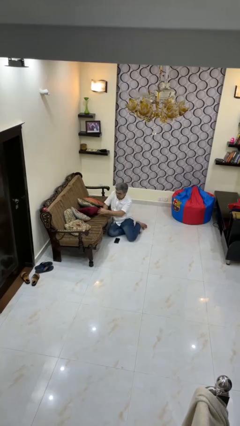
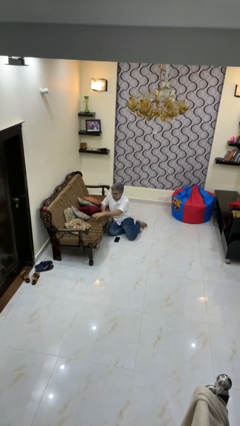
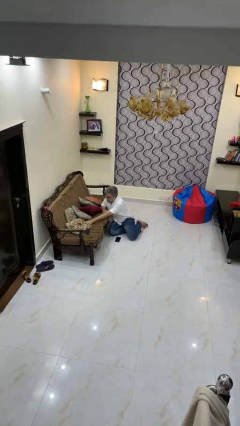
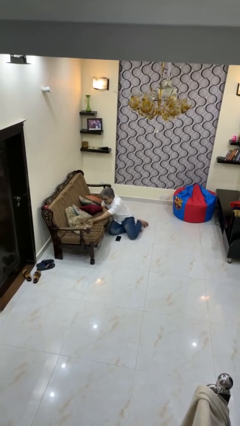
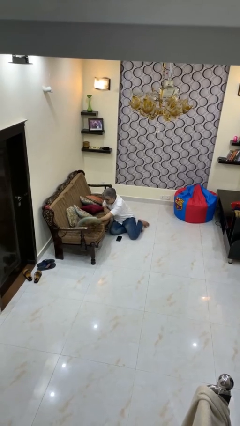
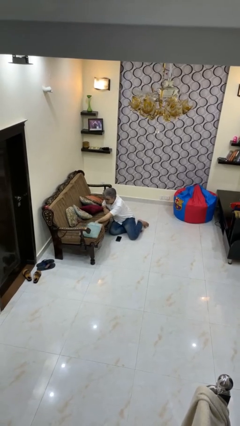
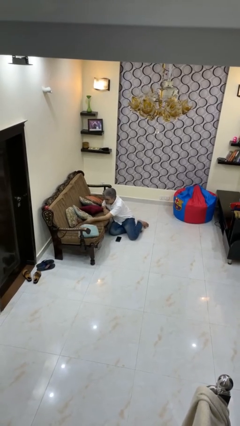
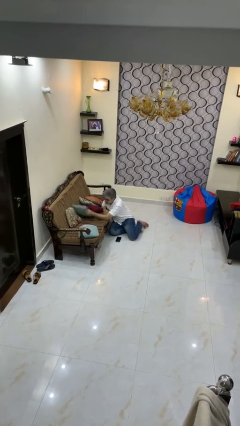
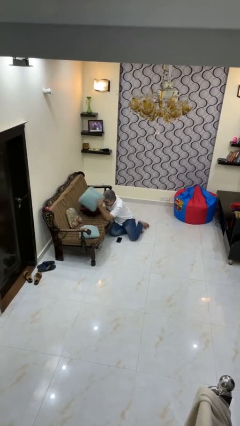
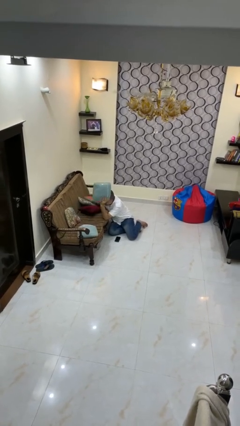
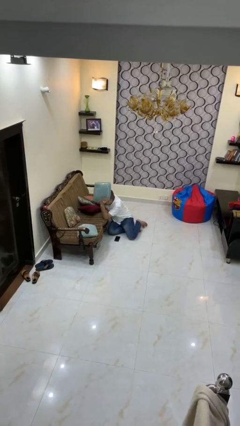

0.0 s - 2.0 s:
person searches in couch

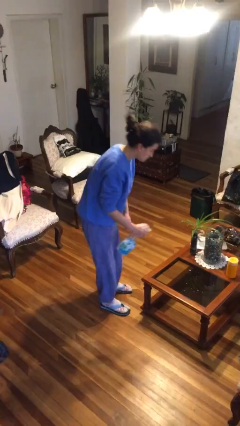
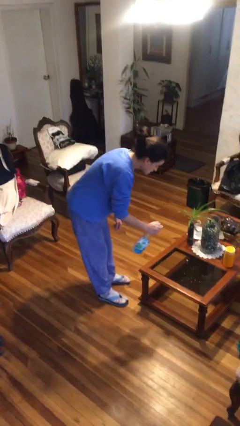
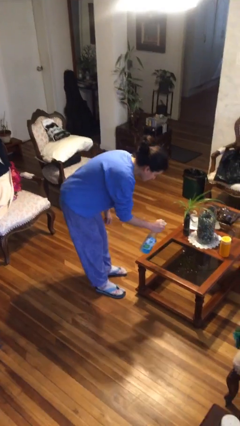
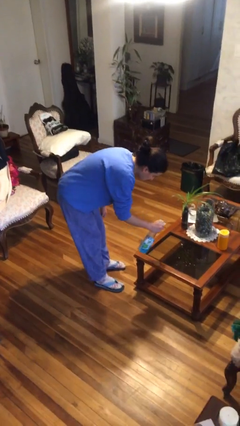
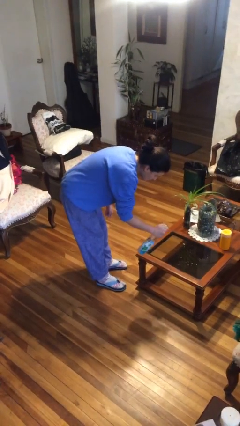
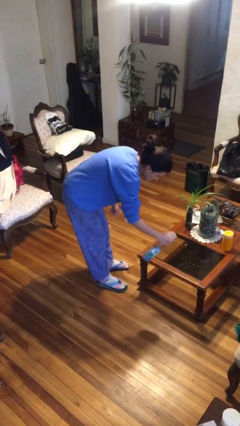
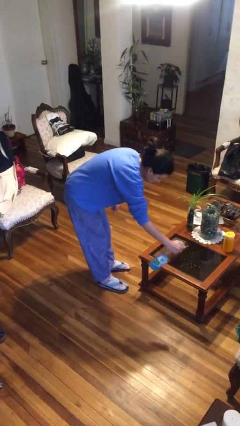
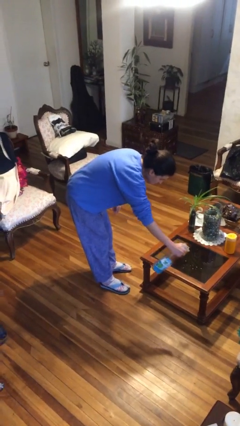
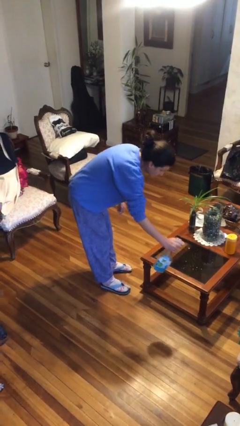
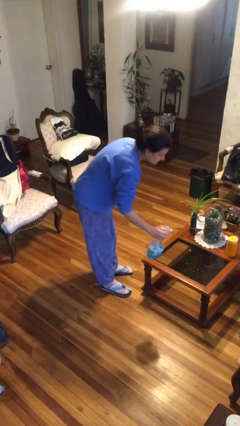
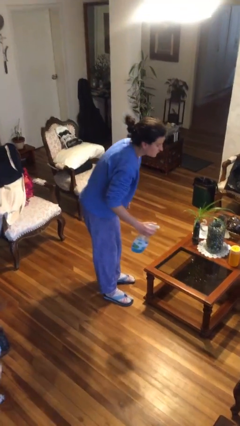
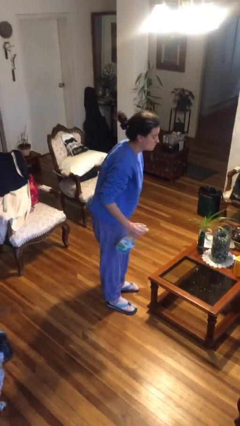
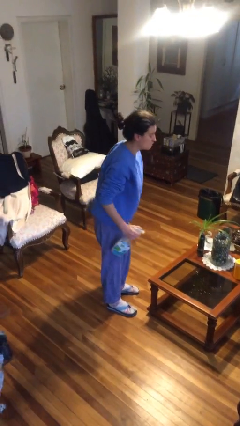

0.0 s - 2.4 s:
person sprays from bottle

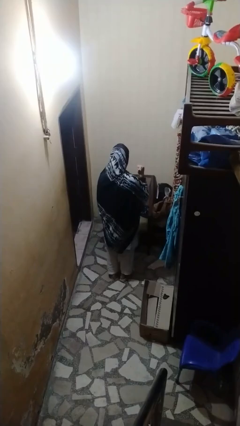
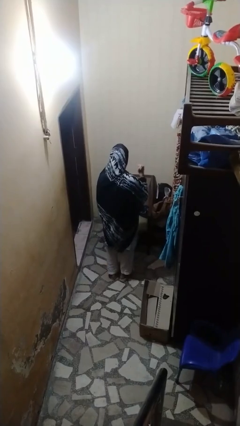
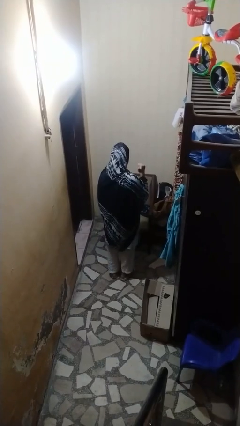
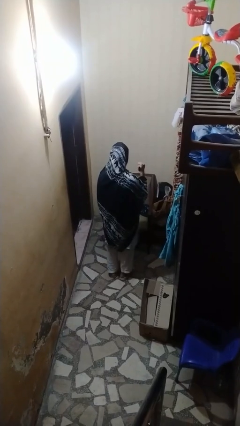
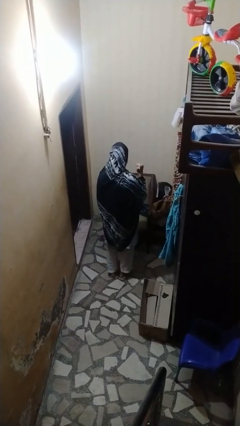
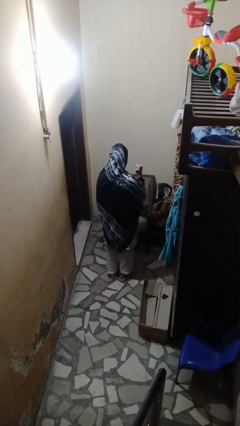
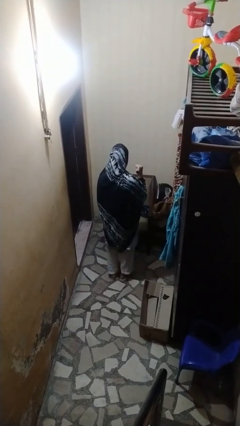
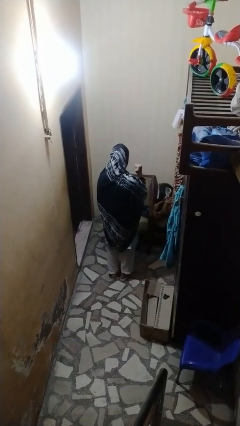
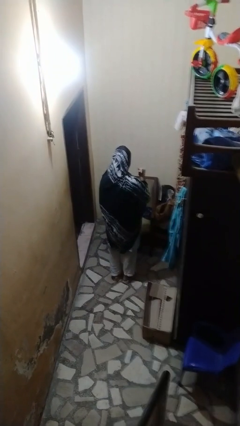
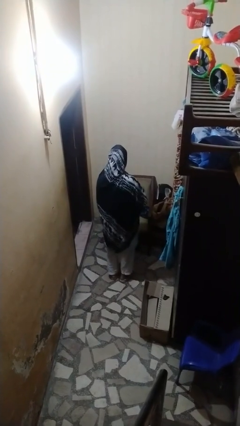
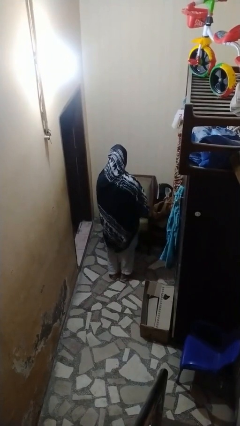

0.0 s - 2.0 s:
person gestures behind me

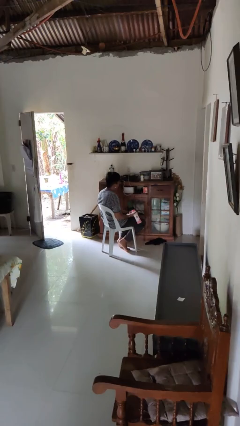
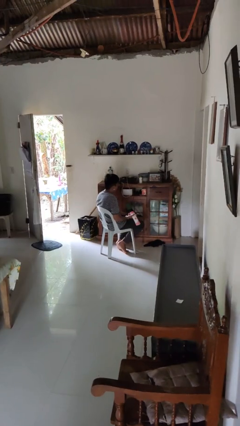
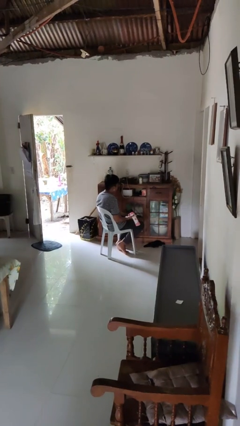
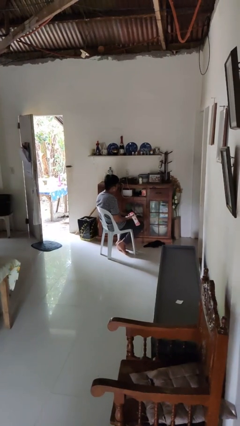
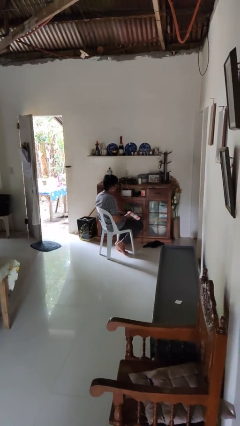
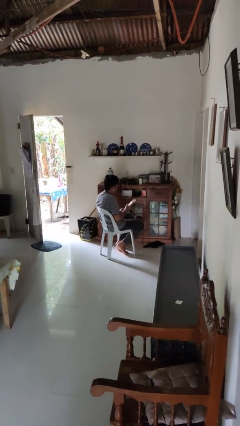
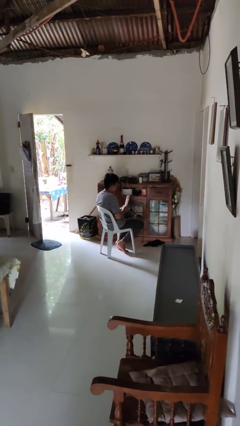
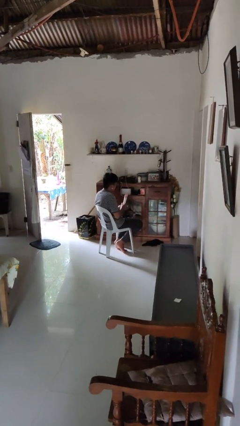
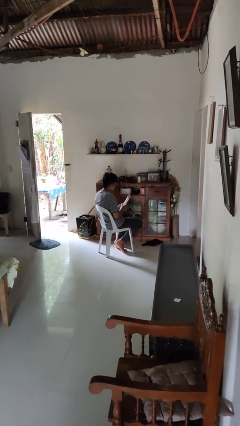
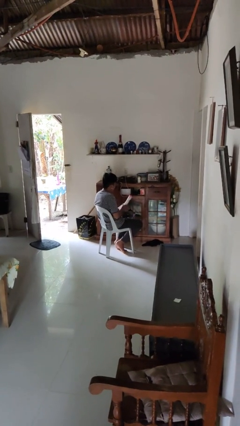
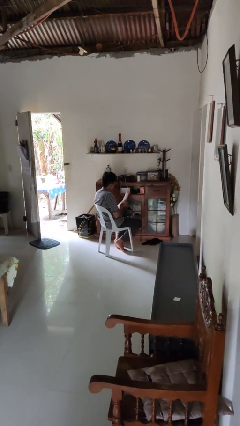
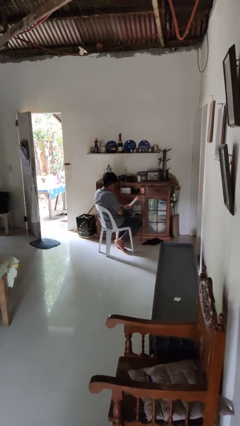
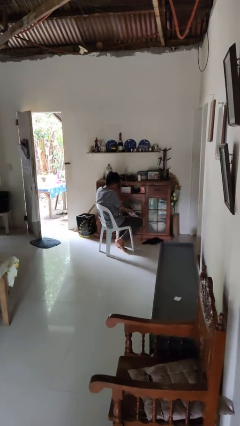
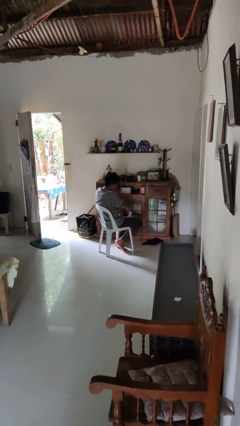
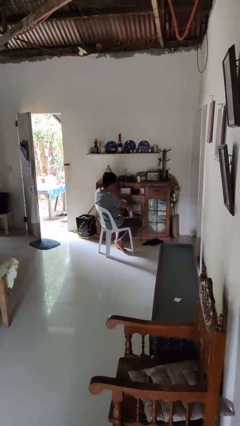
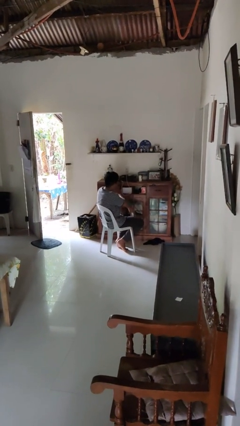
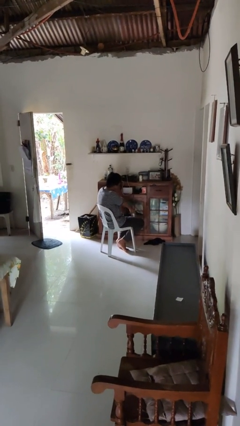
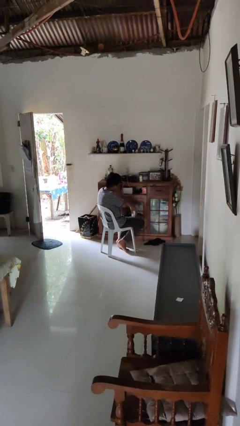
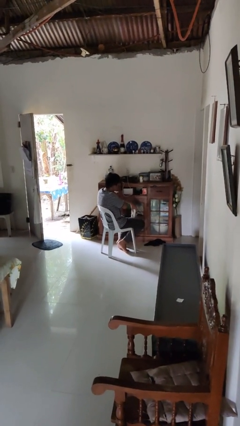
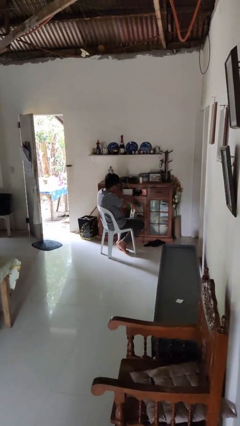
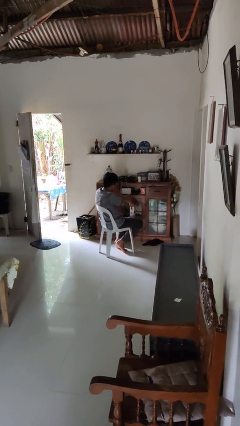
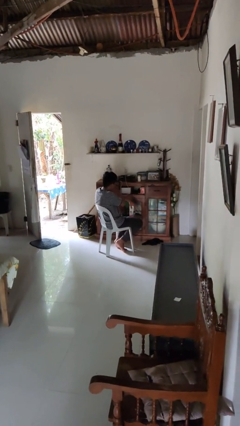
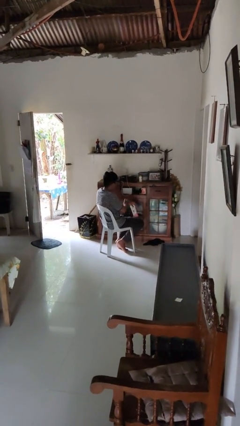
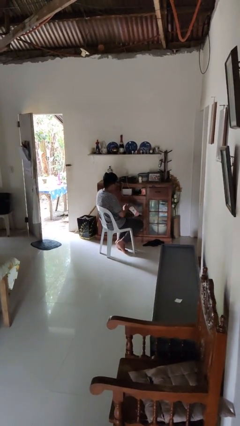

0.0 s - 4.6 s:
person applies sunscreen

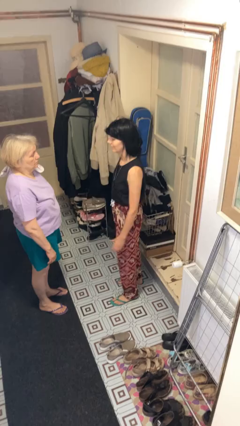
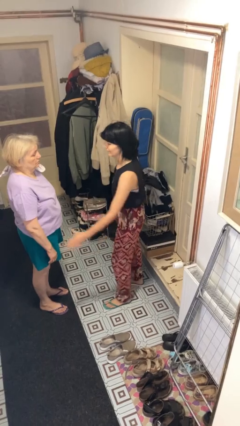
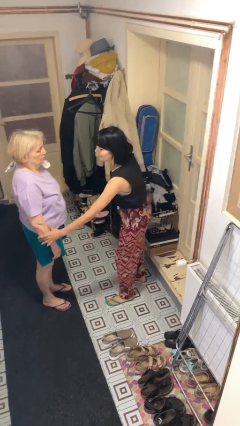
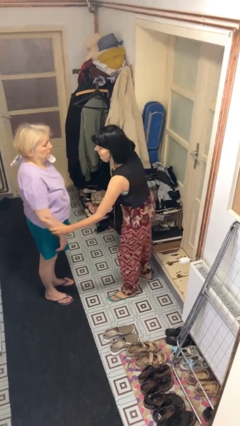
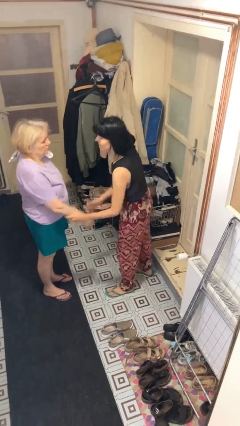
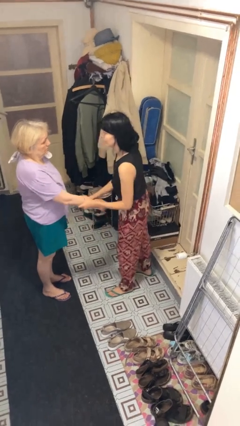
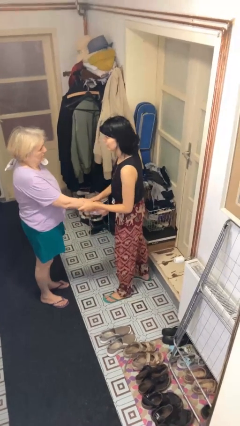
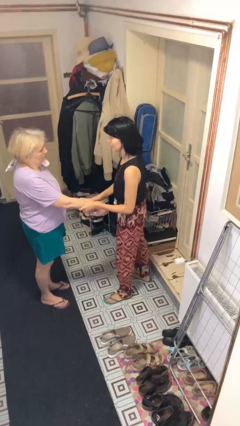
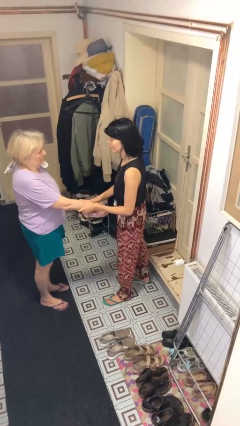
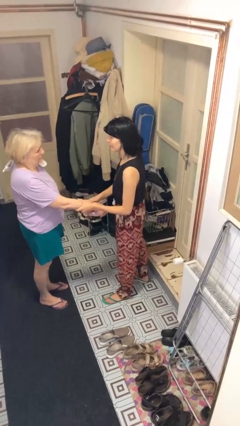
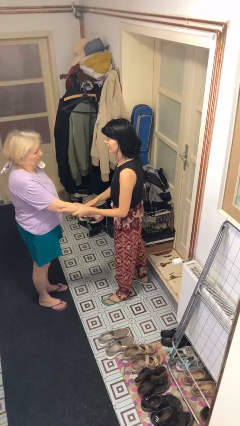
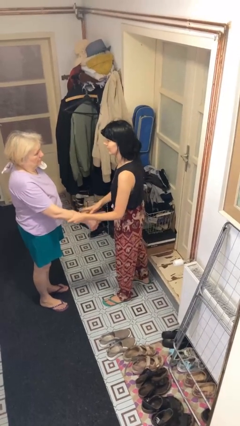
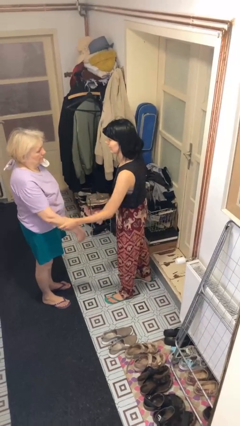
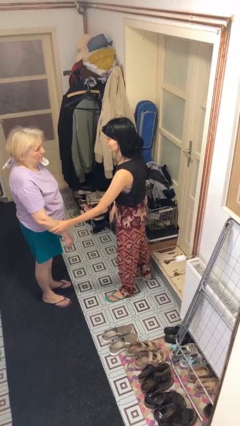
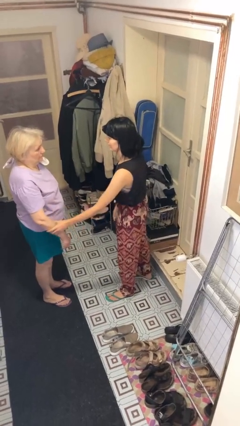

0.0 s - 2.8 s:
person grabs person by forearm

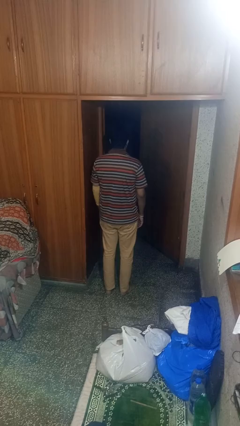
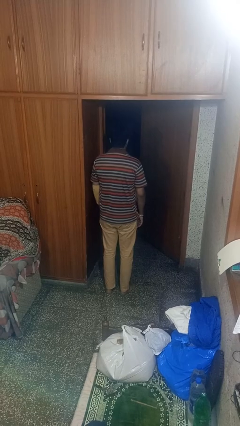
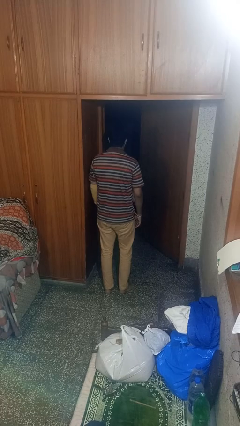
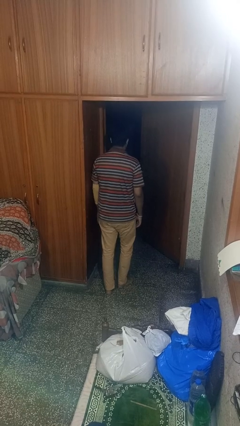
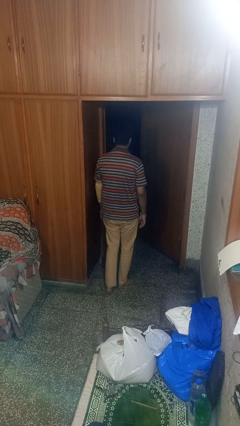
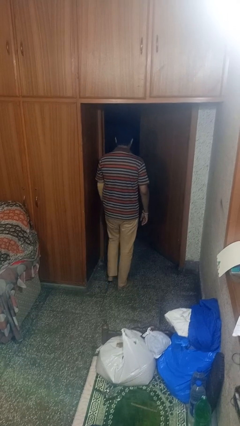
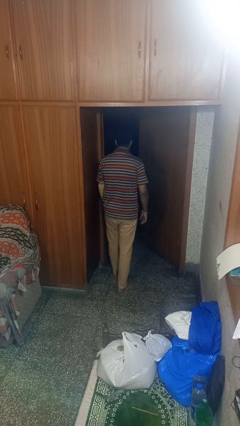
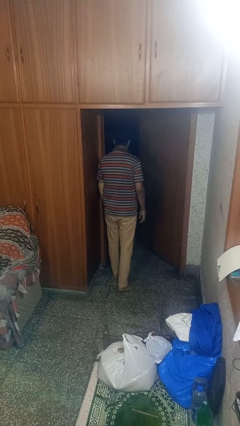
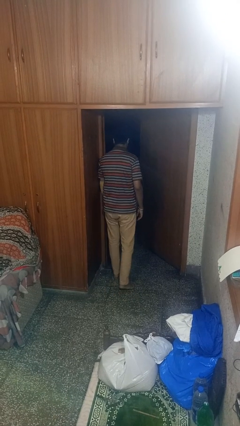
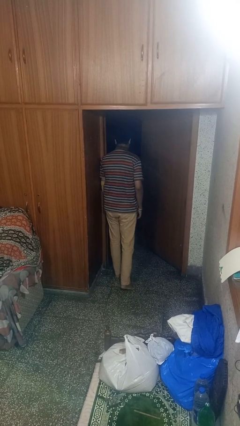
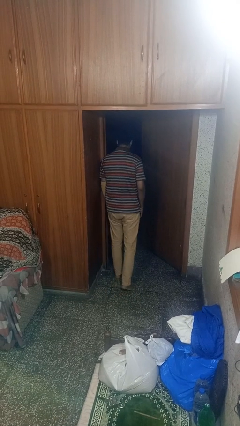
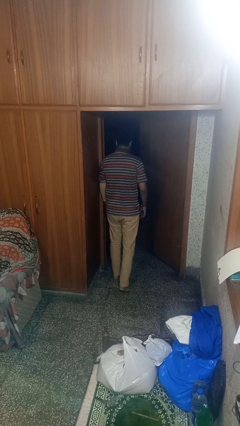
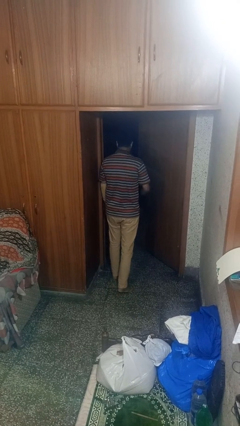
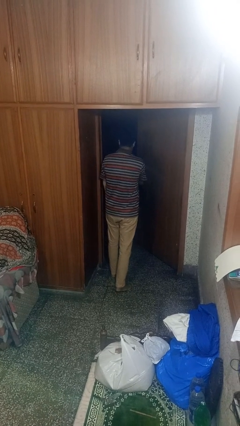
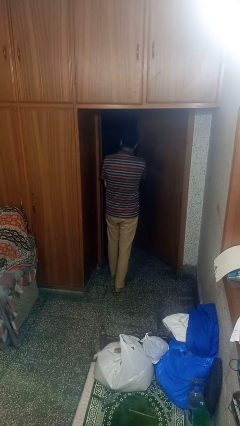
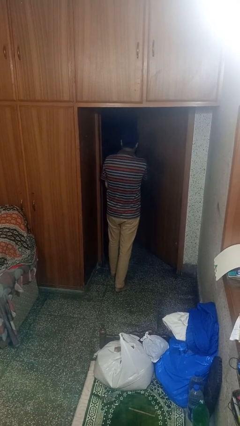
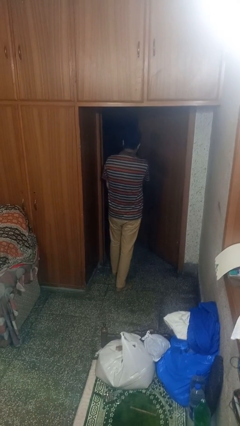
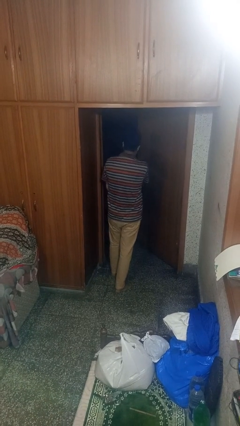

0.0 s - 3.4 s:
person bumps into wall

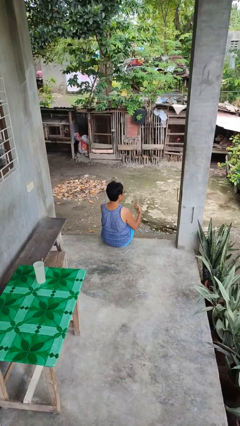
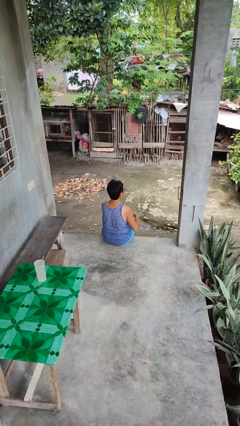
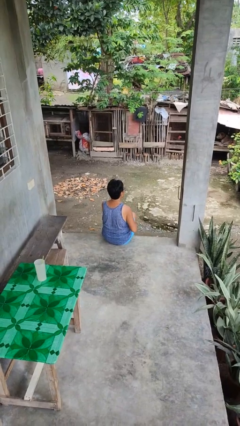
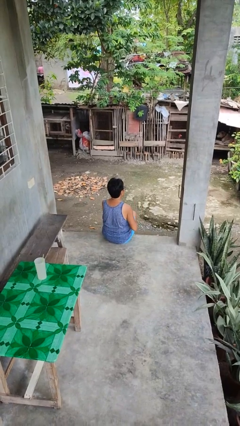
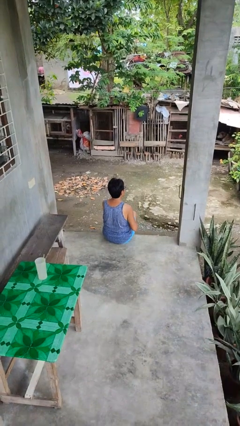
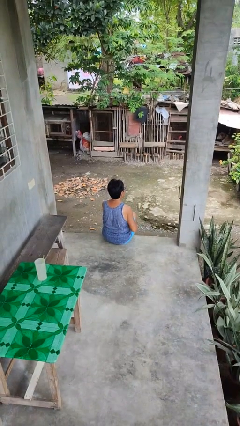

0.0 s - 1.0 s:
person puts phone into pocket
